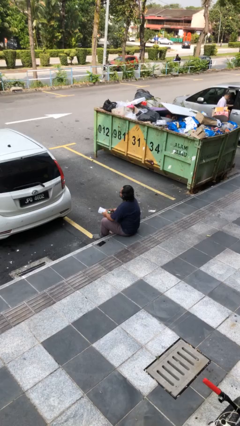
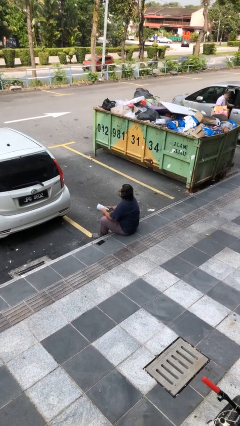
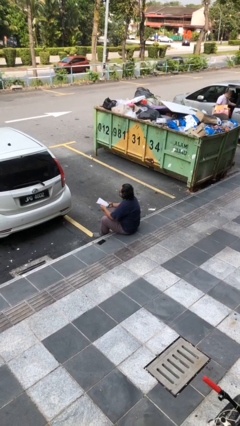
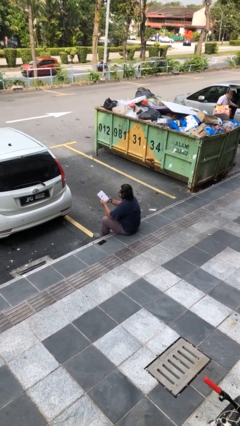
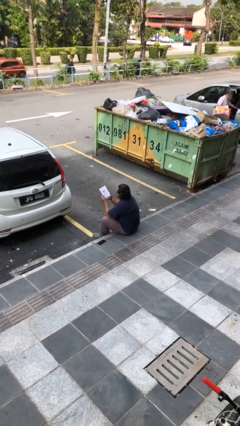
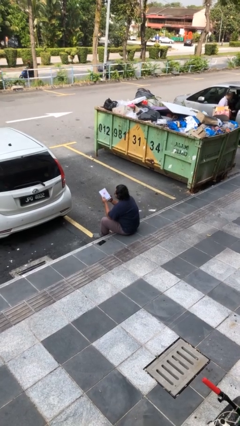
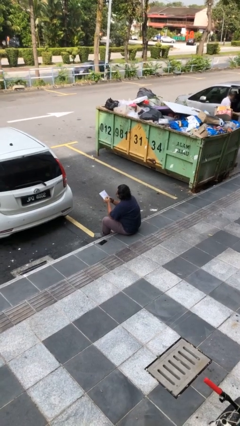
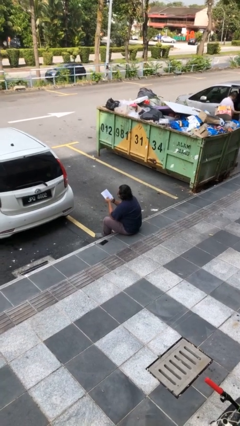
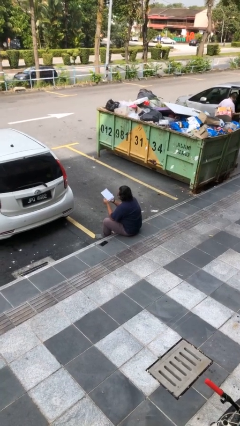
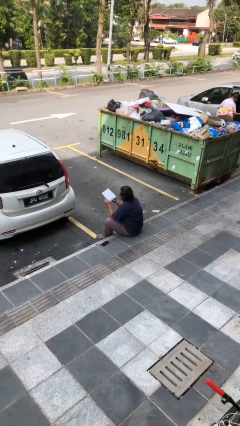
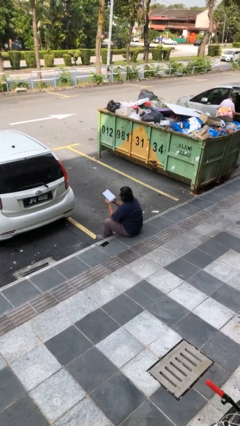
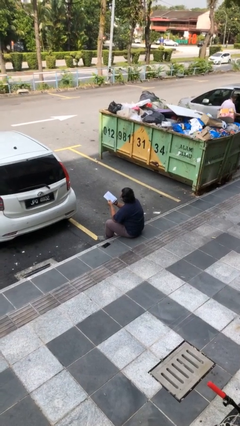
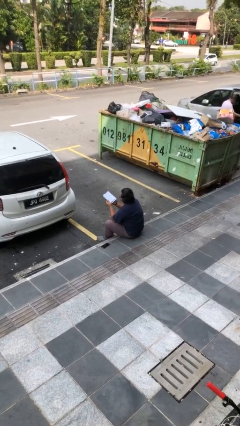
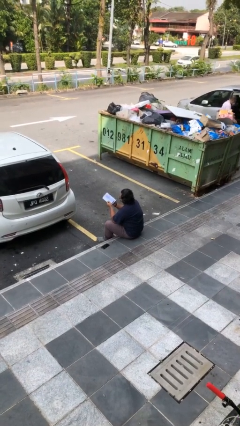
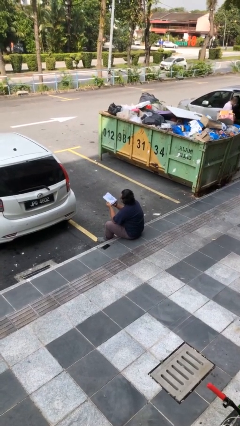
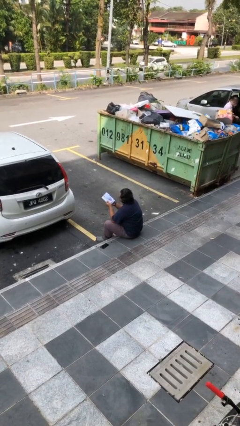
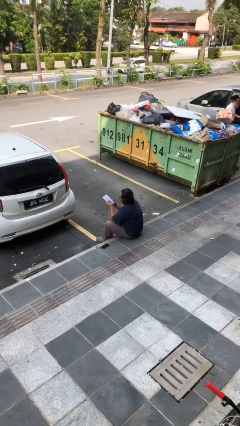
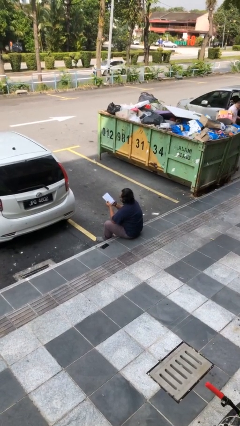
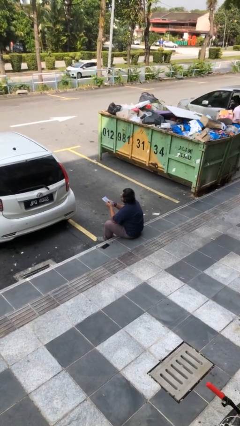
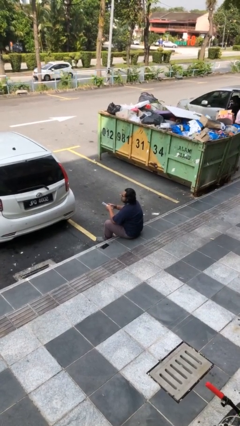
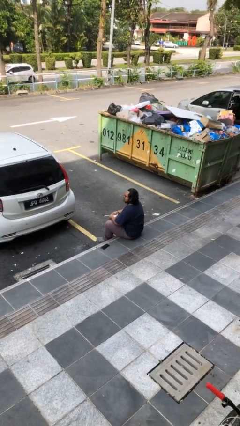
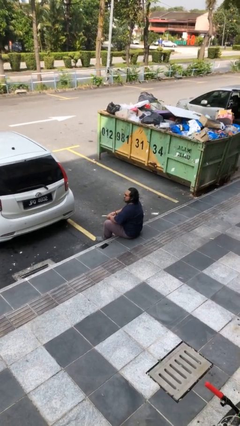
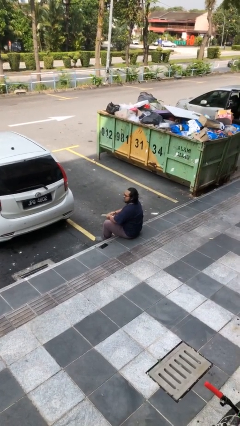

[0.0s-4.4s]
person reads document

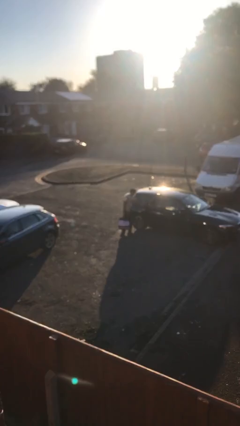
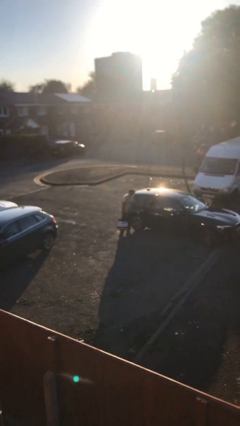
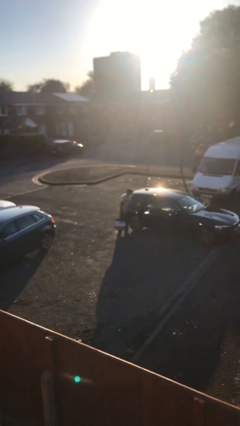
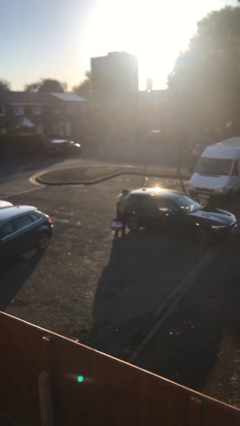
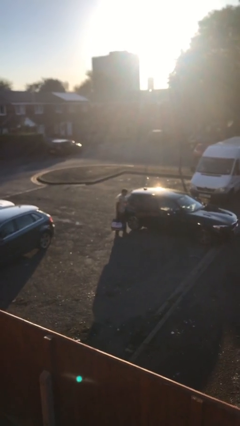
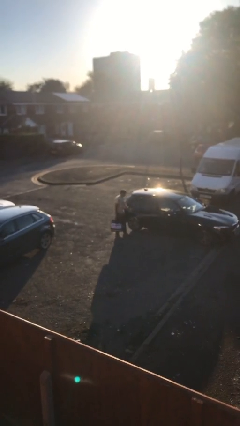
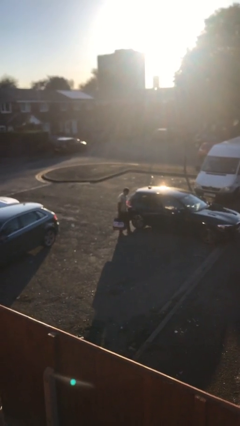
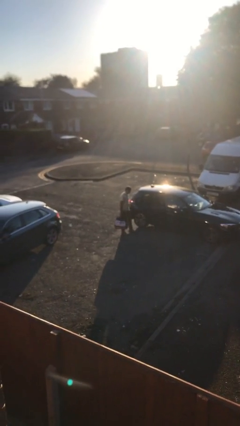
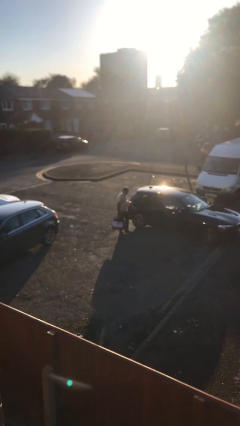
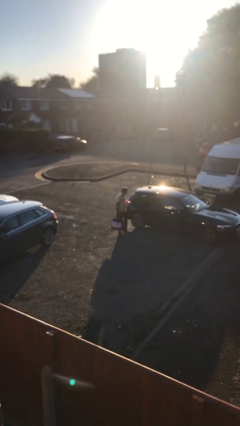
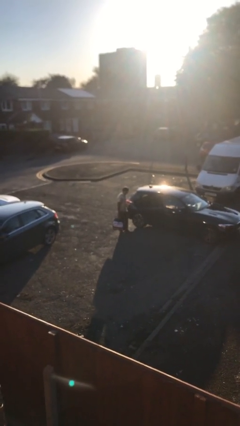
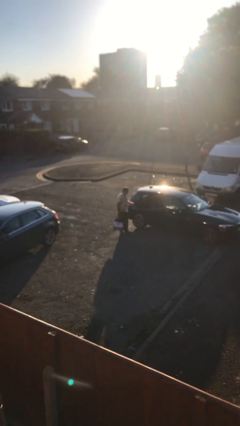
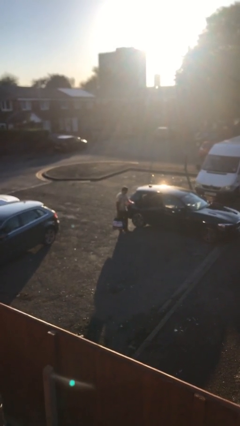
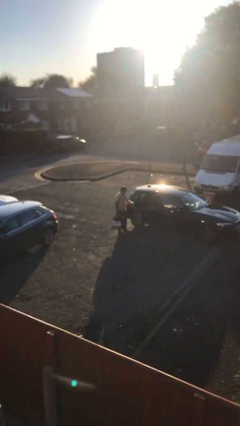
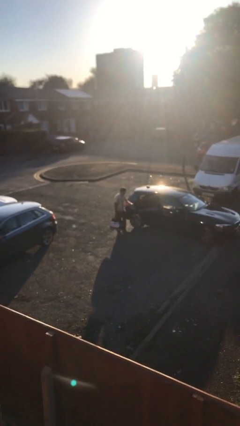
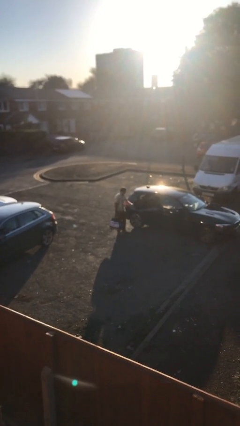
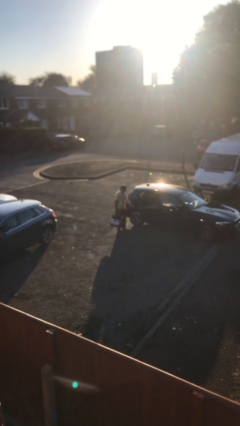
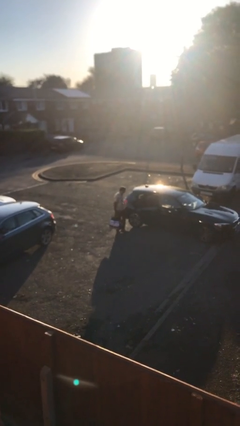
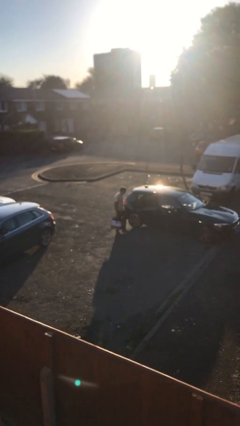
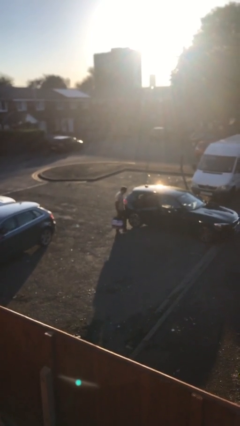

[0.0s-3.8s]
person opens car door

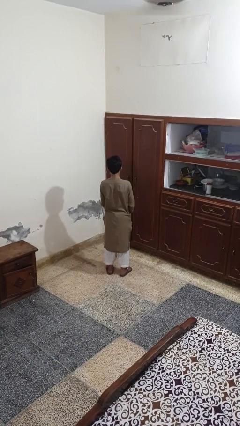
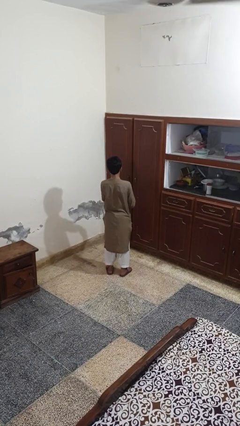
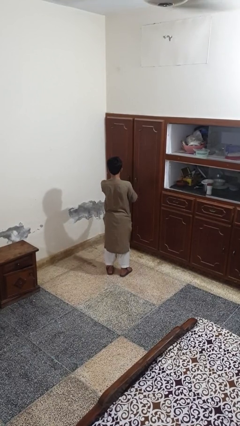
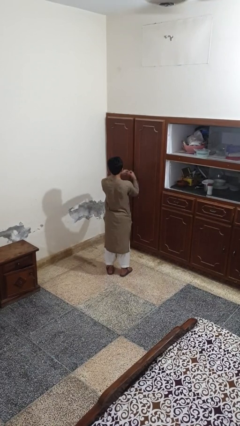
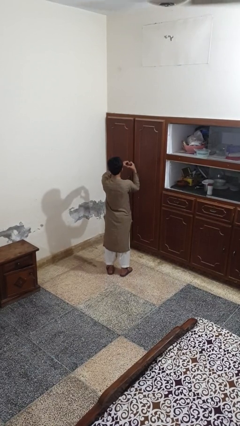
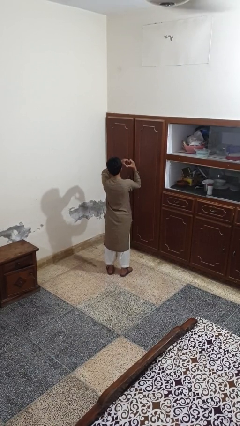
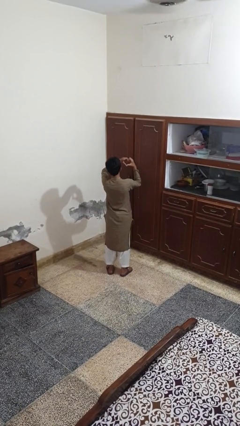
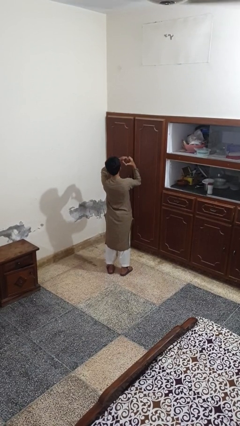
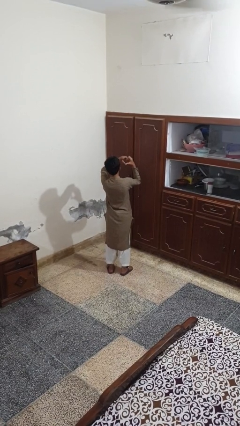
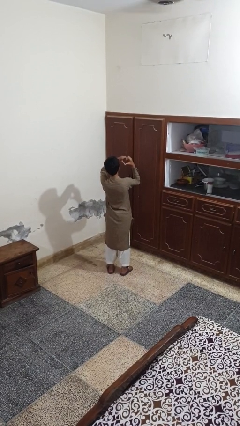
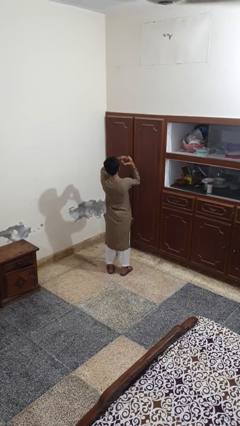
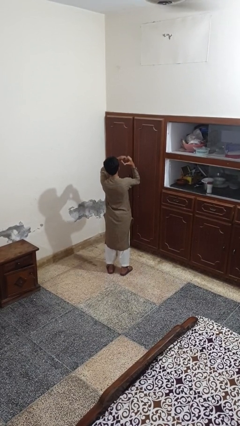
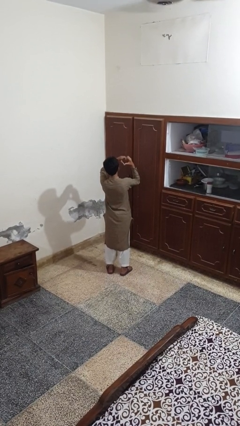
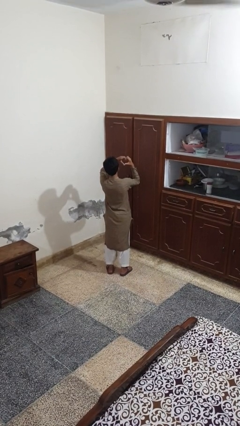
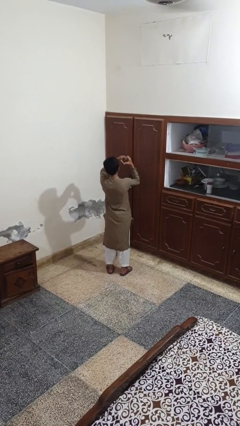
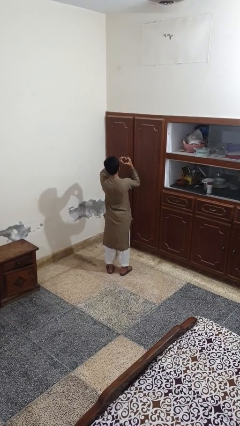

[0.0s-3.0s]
person gestures heart

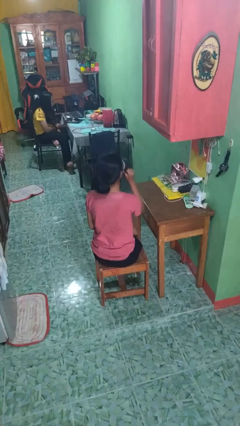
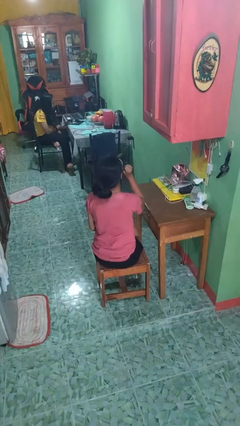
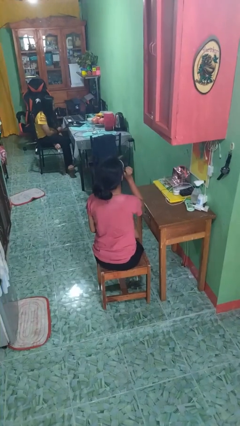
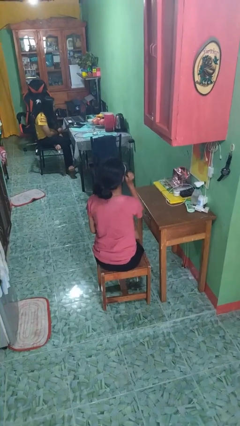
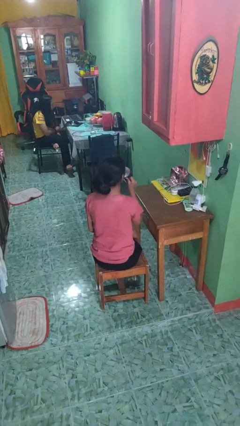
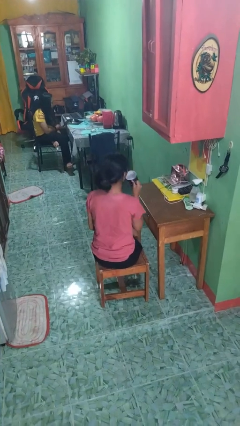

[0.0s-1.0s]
person drinks from mug

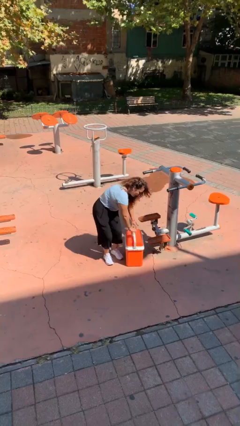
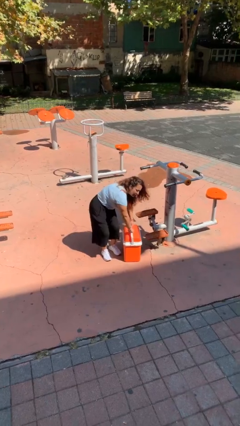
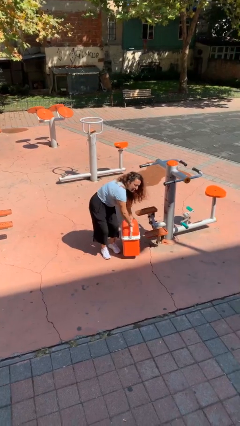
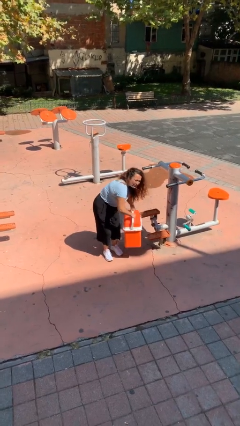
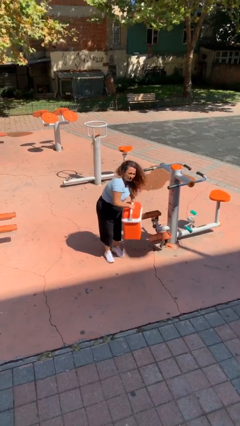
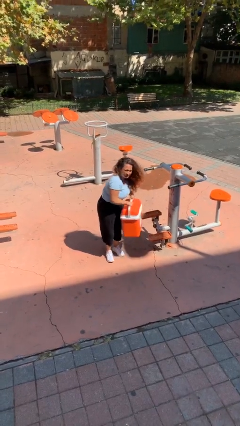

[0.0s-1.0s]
person picks up object from floor

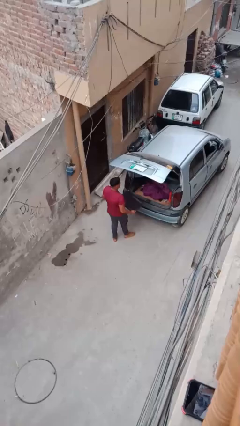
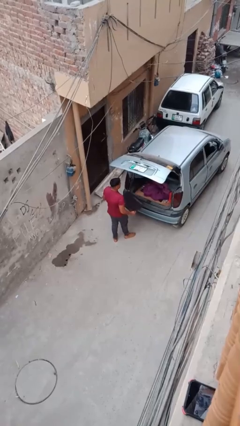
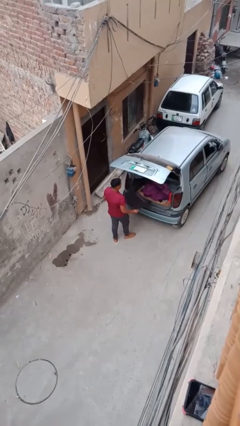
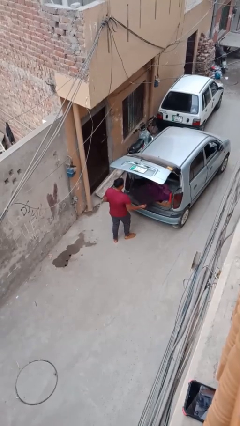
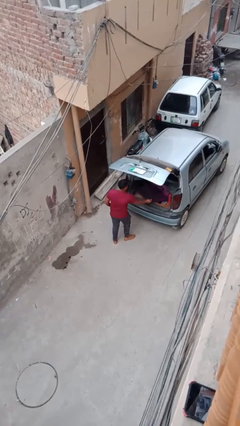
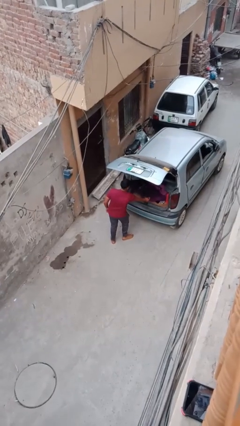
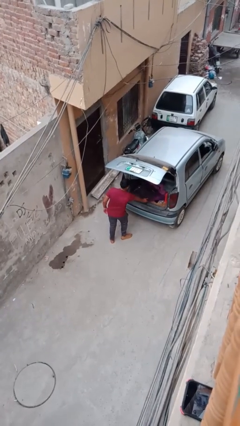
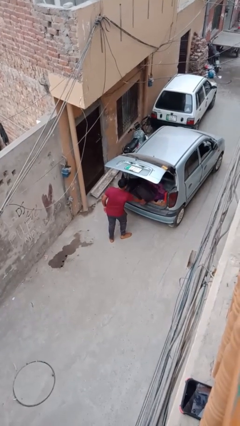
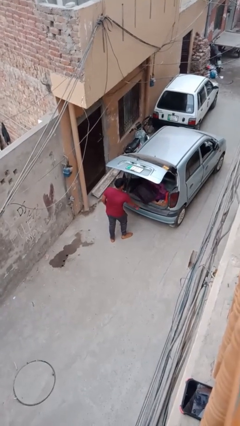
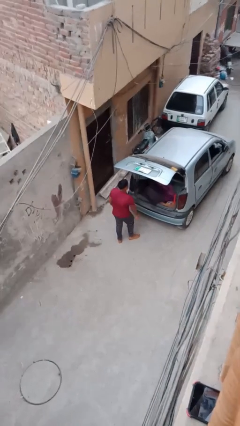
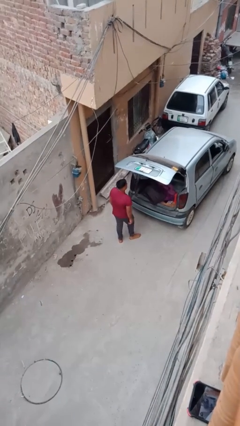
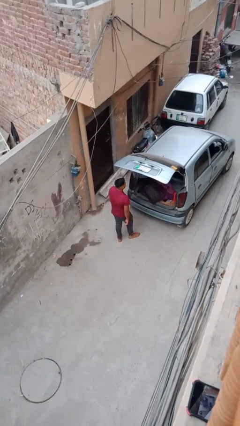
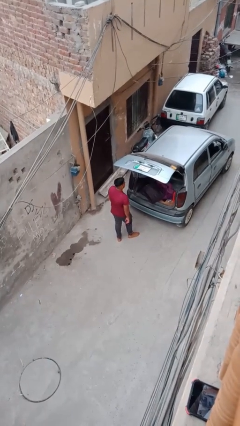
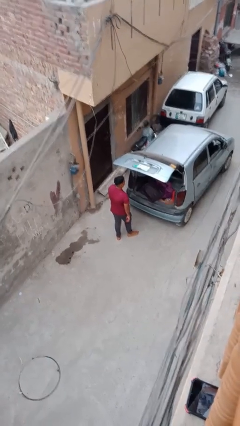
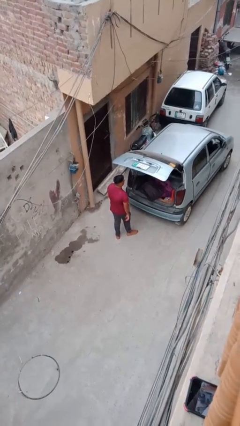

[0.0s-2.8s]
person loads car

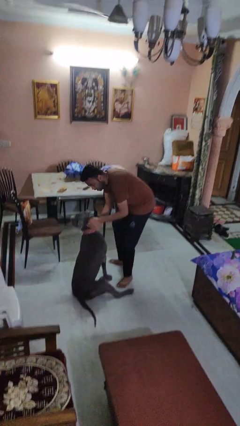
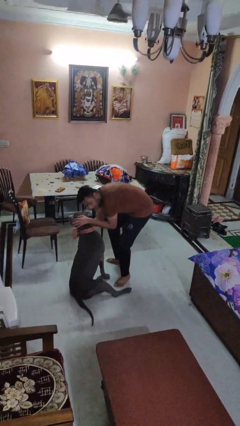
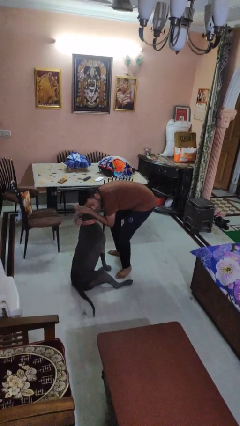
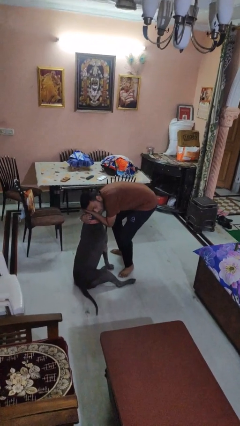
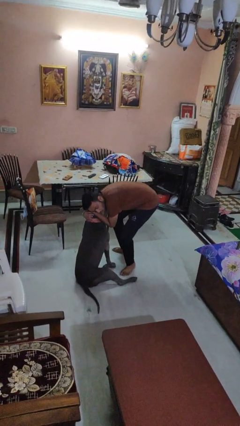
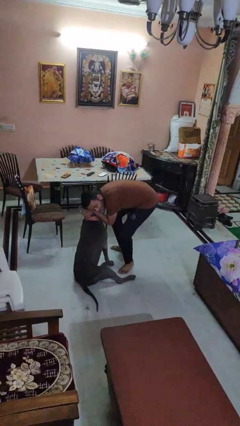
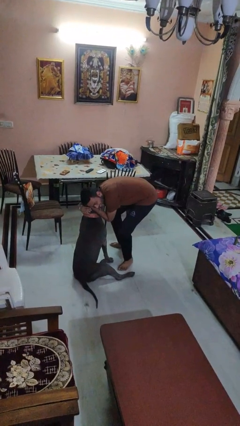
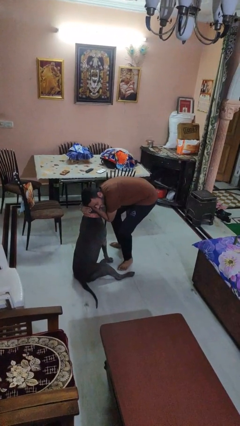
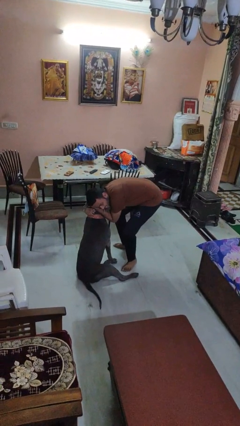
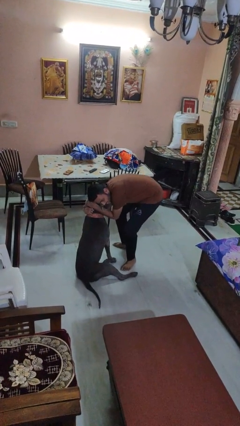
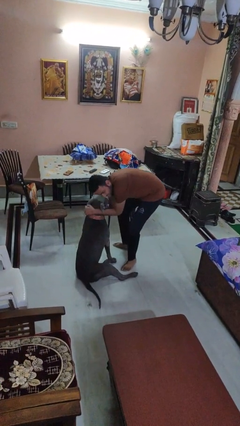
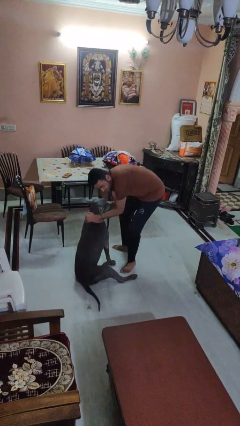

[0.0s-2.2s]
person hugs dog
